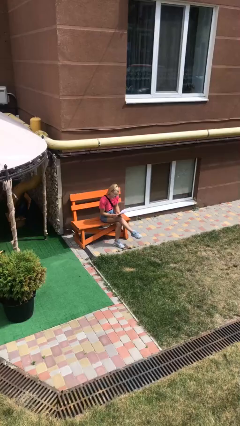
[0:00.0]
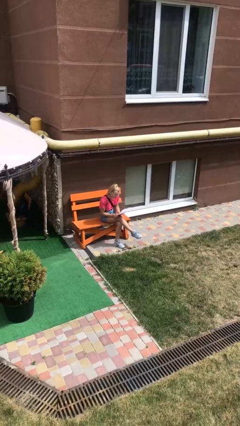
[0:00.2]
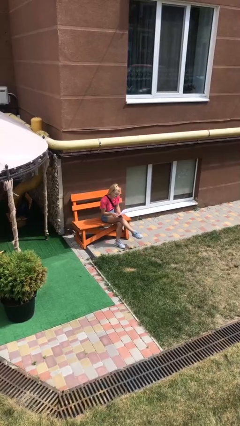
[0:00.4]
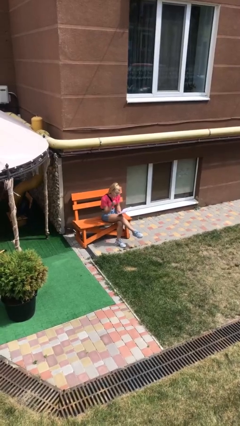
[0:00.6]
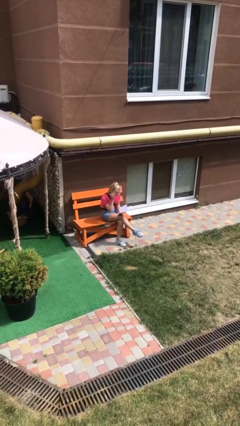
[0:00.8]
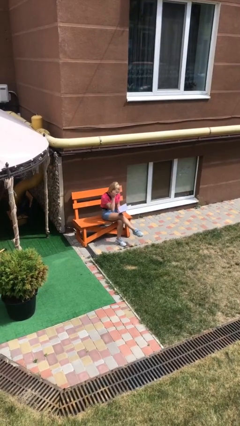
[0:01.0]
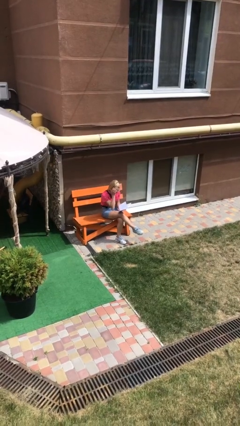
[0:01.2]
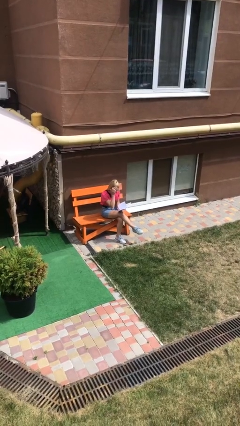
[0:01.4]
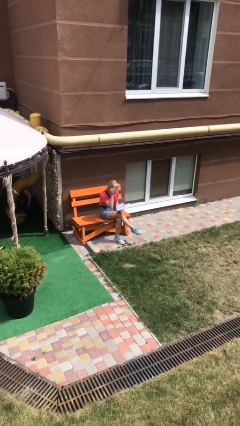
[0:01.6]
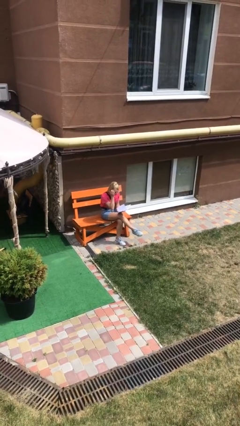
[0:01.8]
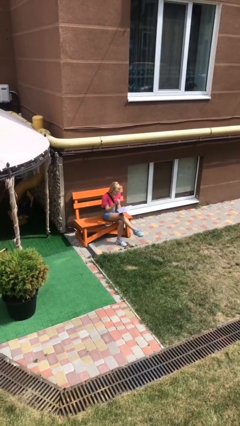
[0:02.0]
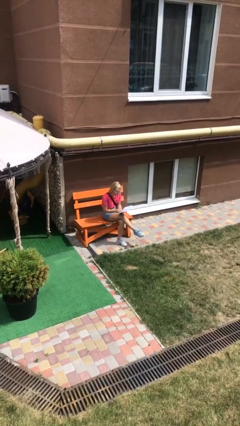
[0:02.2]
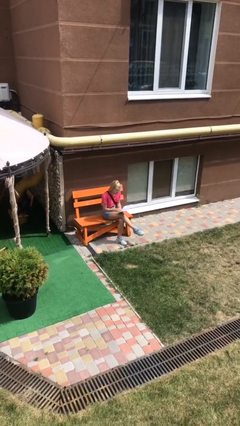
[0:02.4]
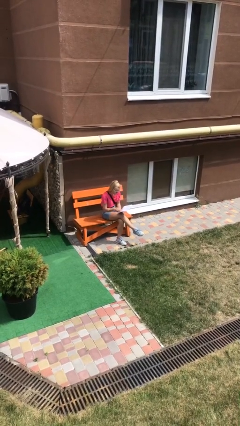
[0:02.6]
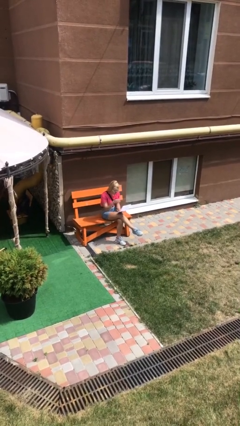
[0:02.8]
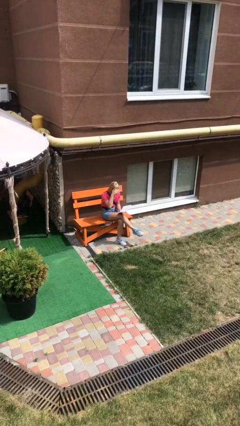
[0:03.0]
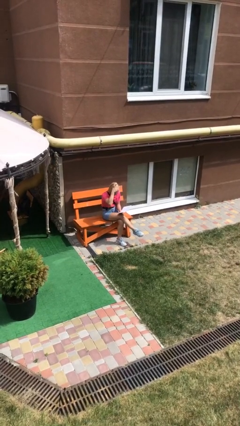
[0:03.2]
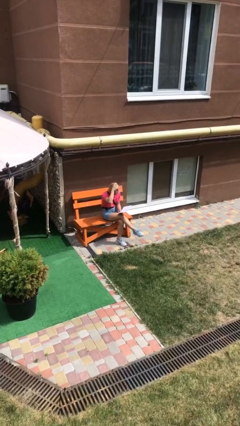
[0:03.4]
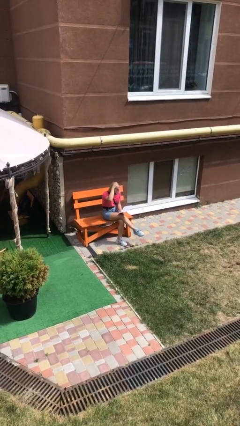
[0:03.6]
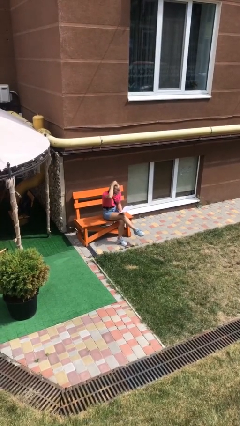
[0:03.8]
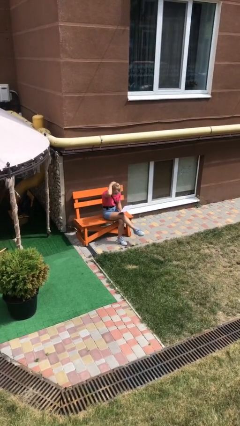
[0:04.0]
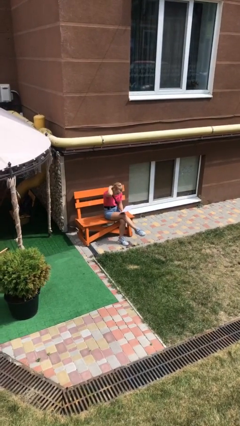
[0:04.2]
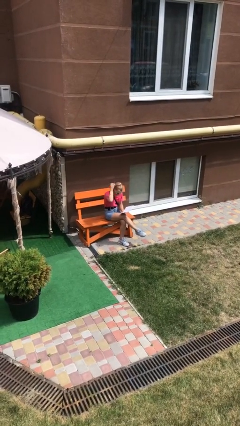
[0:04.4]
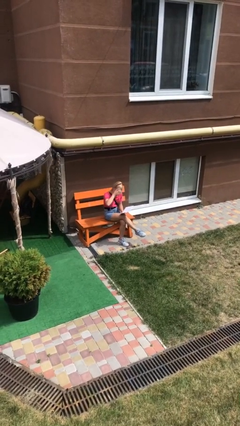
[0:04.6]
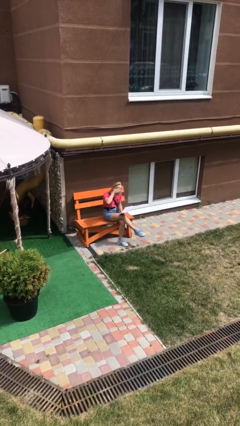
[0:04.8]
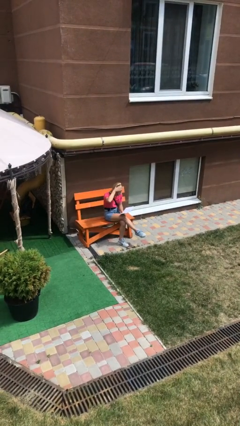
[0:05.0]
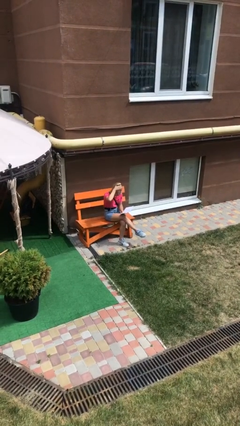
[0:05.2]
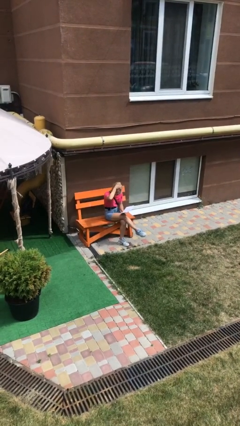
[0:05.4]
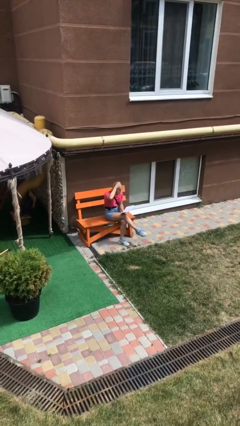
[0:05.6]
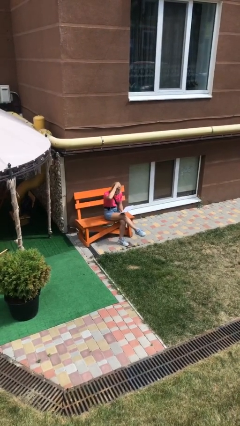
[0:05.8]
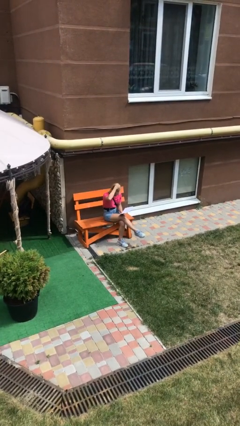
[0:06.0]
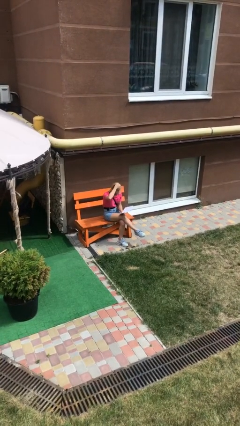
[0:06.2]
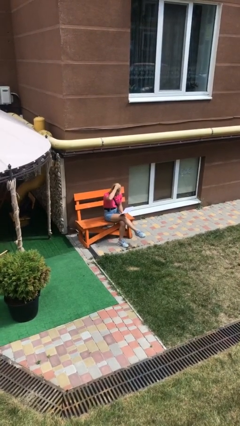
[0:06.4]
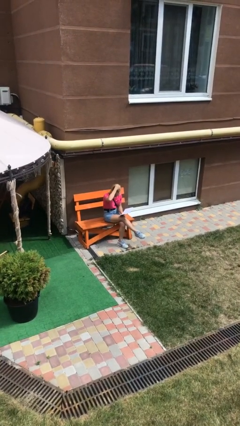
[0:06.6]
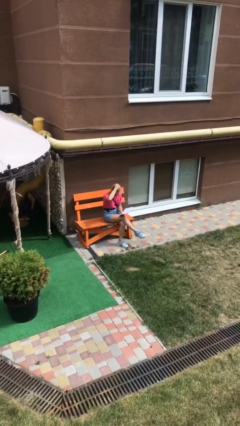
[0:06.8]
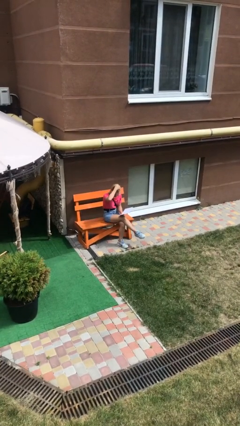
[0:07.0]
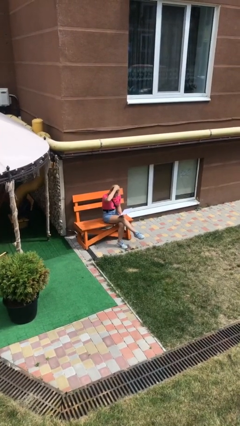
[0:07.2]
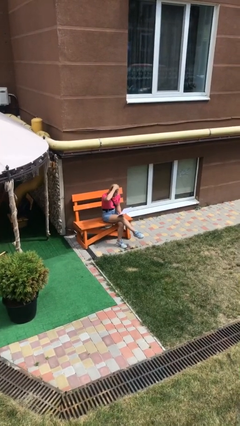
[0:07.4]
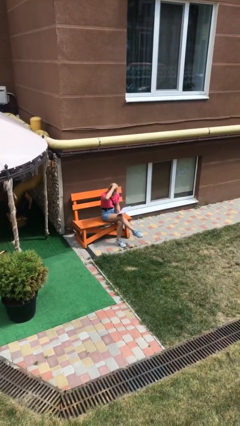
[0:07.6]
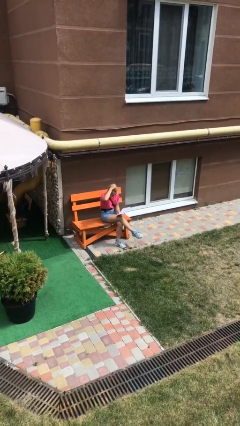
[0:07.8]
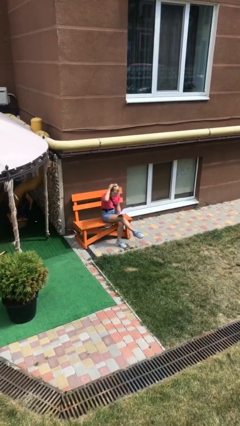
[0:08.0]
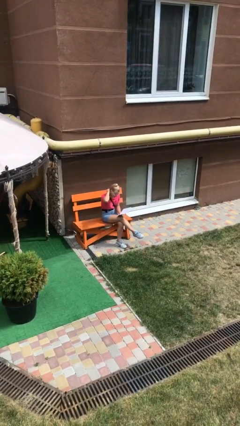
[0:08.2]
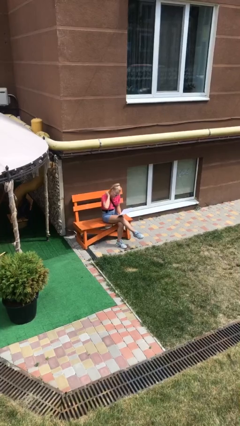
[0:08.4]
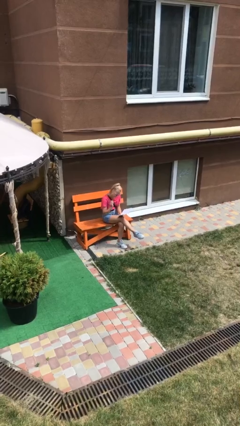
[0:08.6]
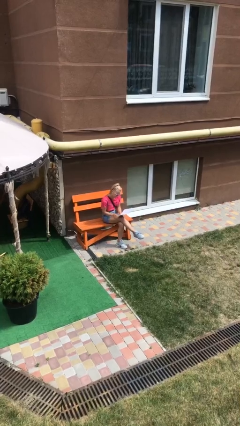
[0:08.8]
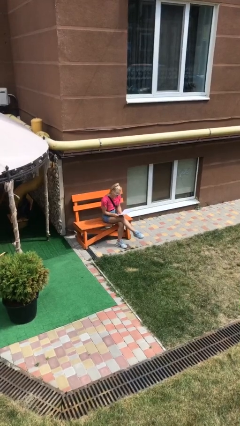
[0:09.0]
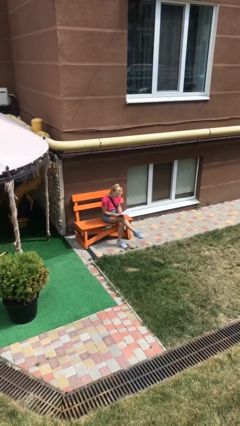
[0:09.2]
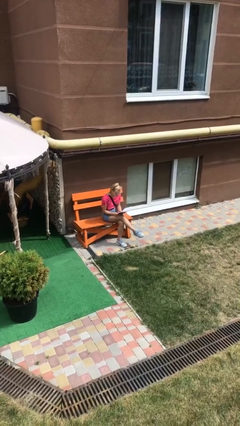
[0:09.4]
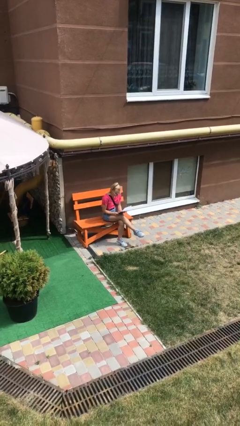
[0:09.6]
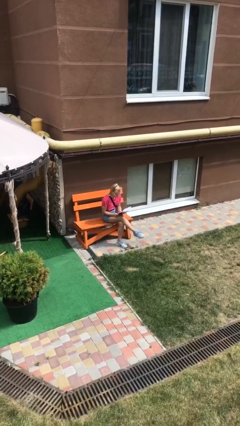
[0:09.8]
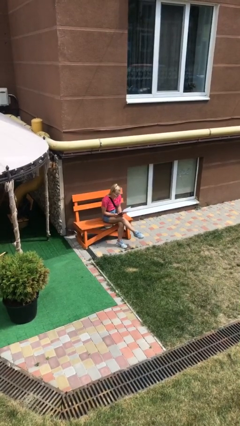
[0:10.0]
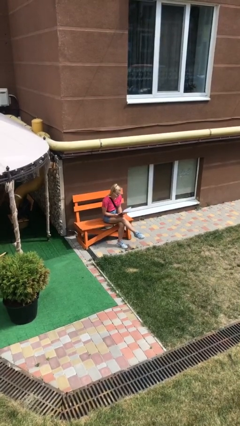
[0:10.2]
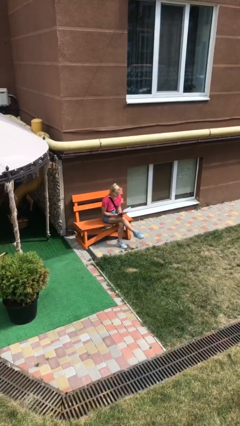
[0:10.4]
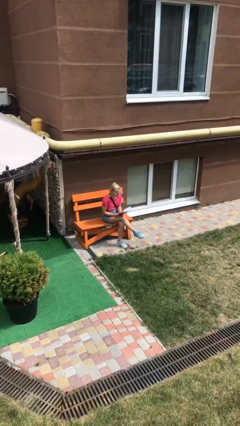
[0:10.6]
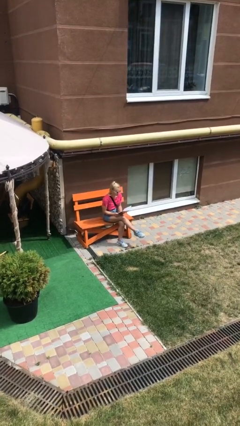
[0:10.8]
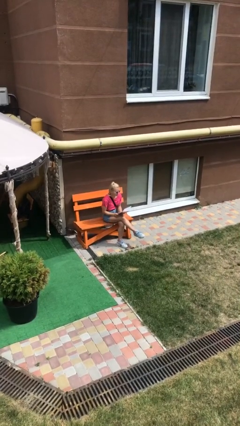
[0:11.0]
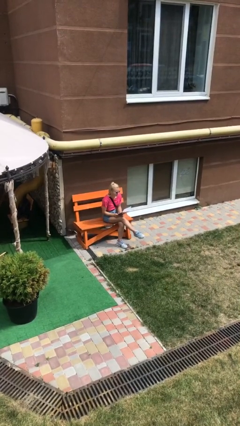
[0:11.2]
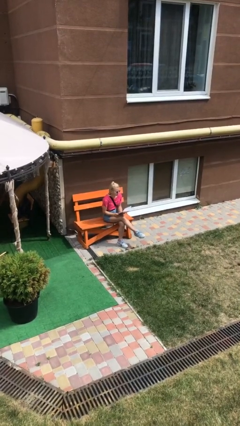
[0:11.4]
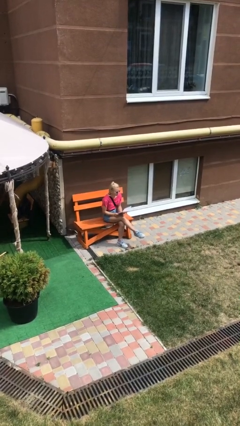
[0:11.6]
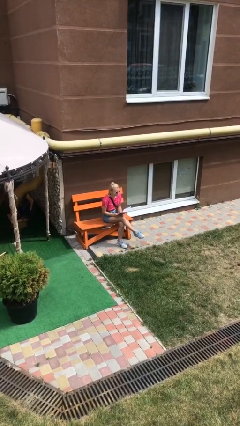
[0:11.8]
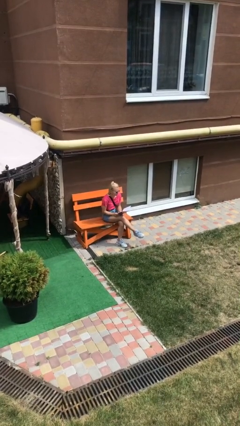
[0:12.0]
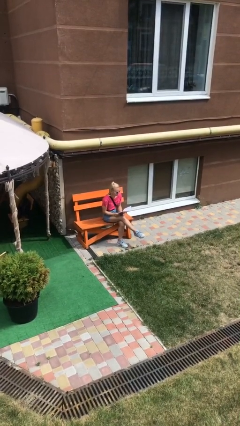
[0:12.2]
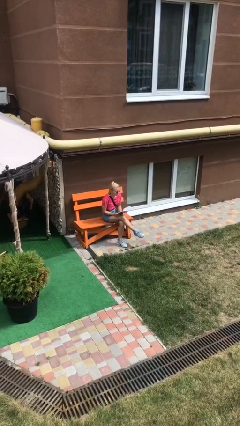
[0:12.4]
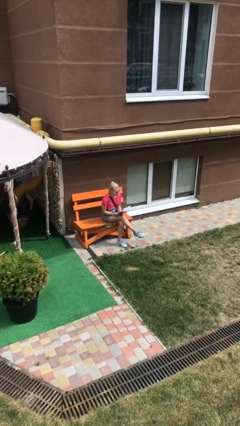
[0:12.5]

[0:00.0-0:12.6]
person reads document

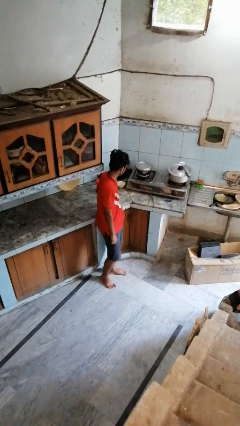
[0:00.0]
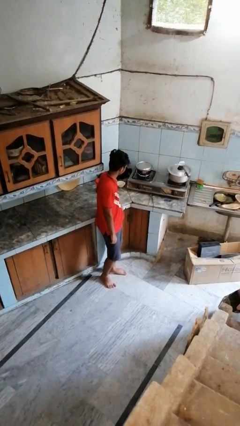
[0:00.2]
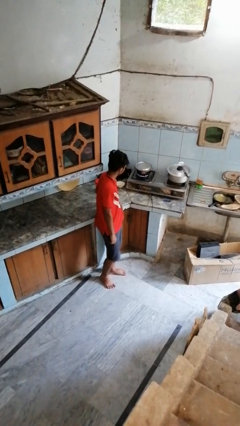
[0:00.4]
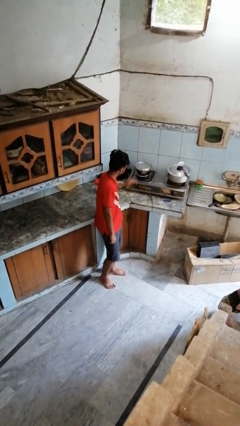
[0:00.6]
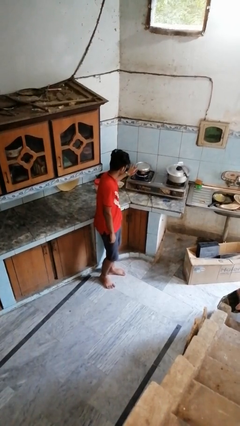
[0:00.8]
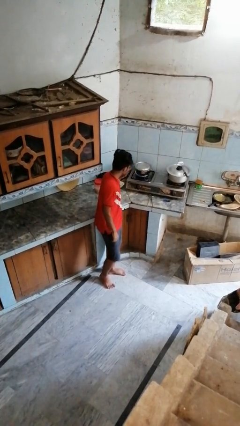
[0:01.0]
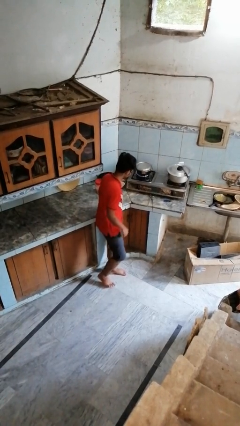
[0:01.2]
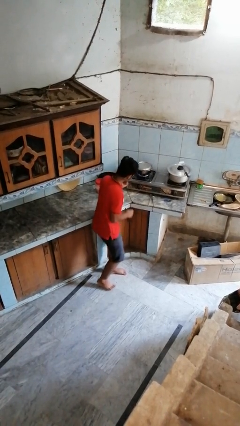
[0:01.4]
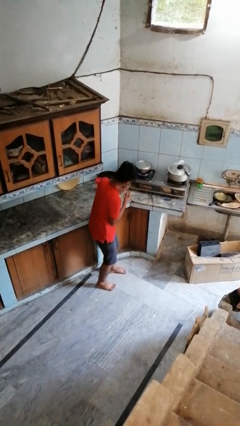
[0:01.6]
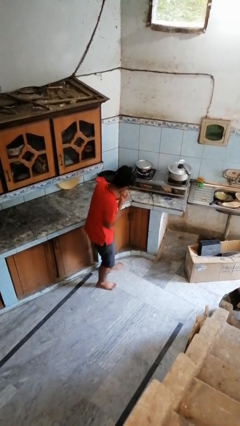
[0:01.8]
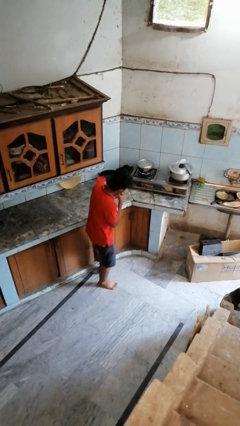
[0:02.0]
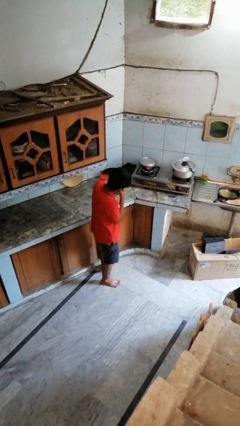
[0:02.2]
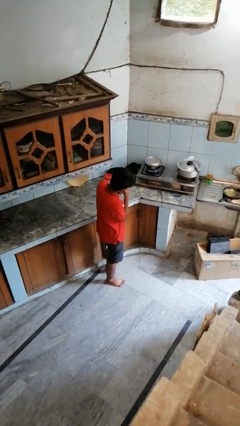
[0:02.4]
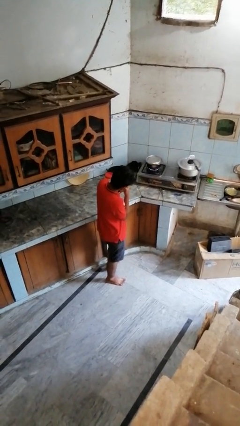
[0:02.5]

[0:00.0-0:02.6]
person burns hand

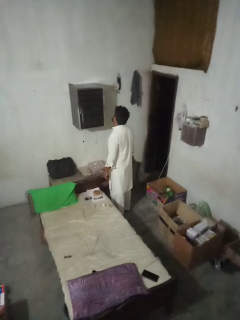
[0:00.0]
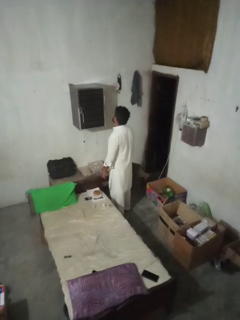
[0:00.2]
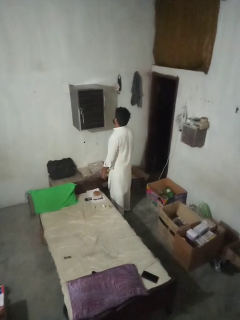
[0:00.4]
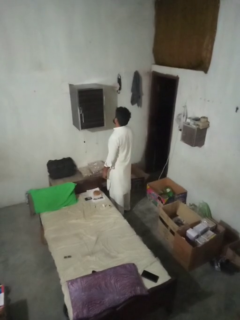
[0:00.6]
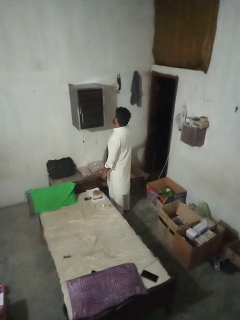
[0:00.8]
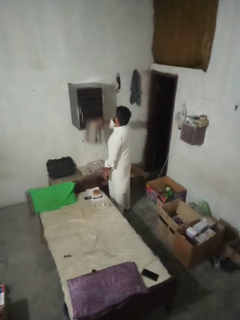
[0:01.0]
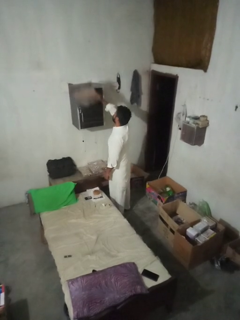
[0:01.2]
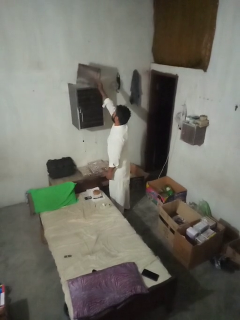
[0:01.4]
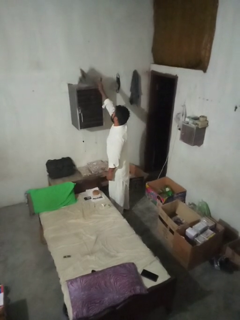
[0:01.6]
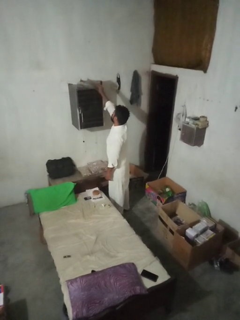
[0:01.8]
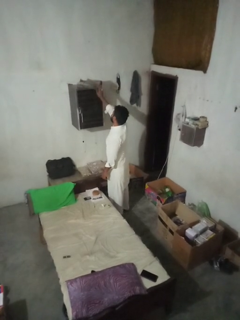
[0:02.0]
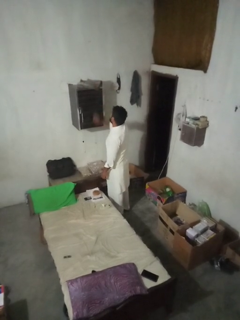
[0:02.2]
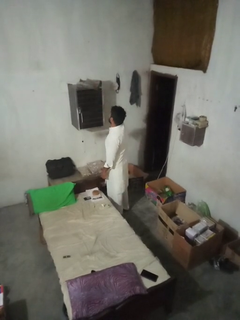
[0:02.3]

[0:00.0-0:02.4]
person puts down object on shelf

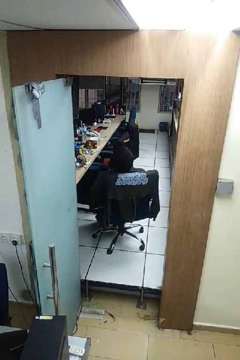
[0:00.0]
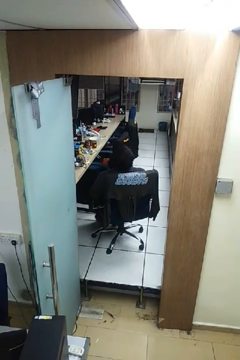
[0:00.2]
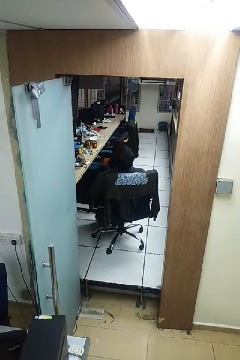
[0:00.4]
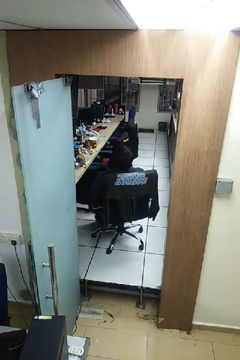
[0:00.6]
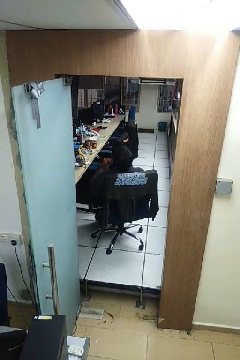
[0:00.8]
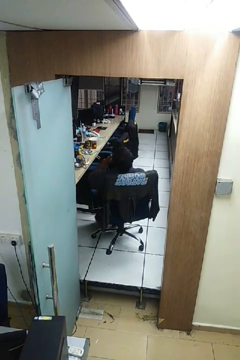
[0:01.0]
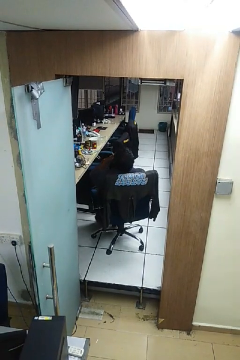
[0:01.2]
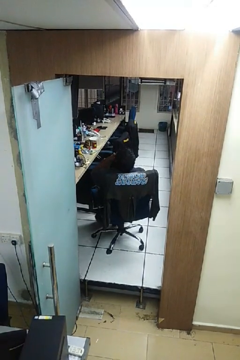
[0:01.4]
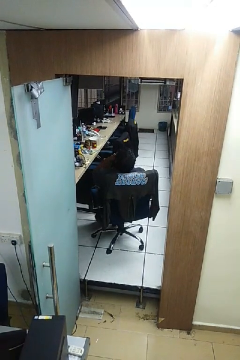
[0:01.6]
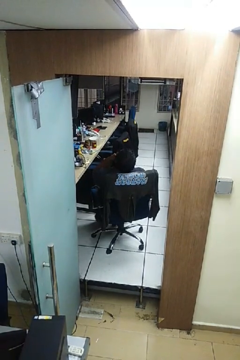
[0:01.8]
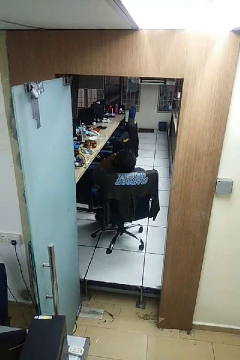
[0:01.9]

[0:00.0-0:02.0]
person yawns
